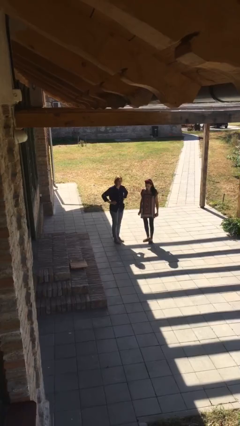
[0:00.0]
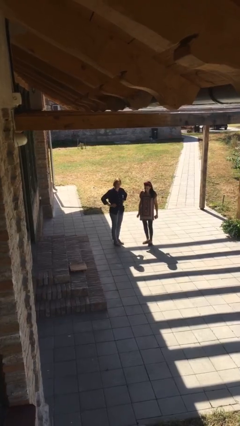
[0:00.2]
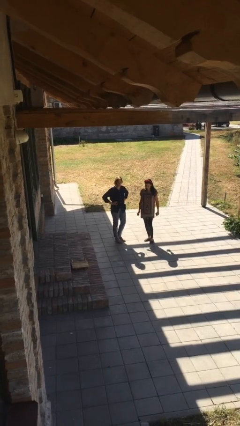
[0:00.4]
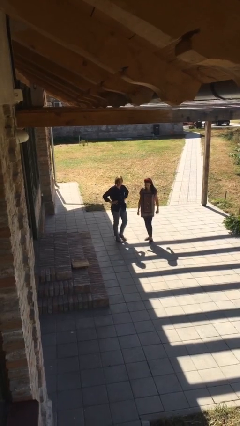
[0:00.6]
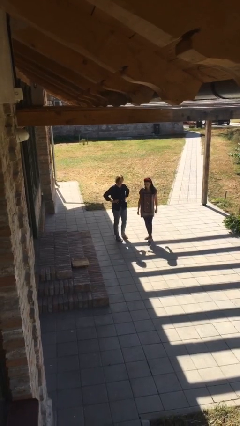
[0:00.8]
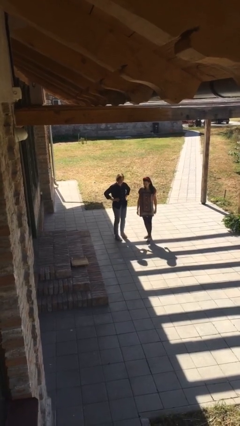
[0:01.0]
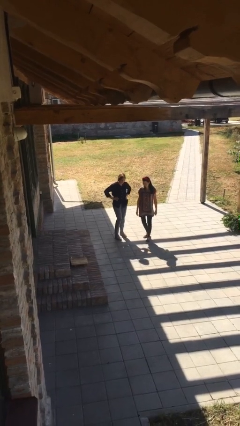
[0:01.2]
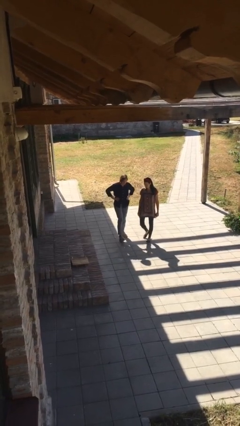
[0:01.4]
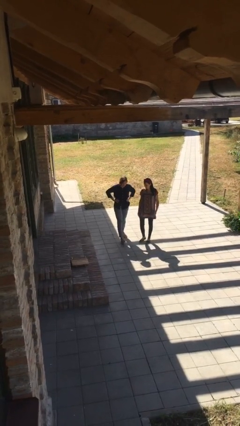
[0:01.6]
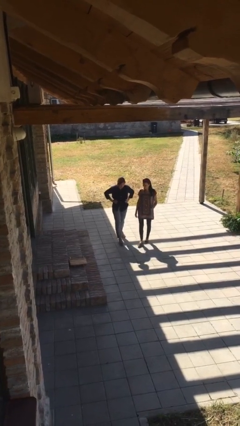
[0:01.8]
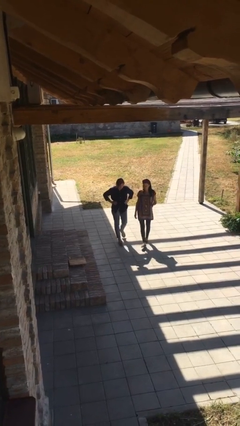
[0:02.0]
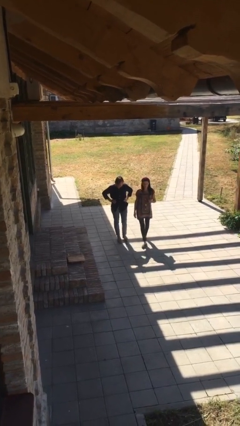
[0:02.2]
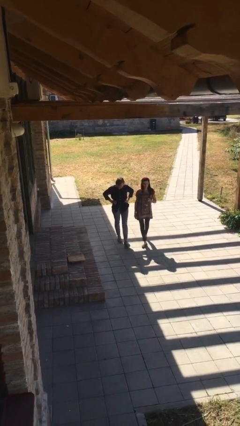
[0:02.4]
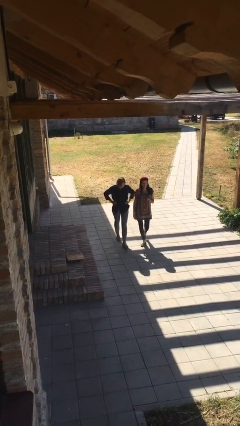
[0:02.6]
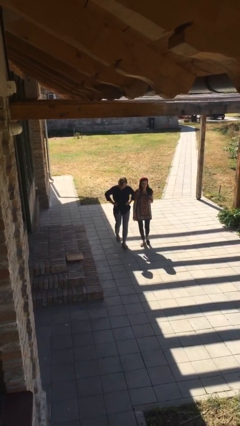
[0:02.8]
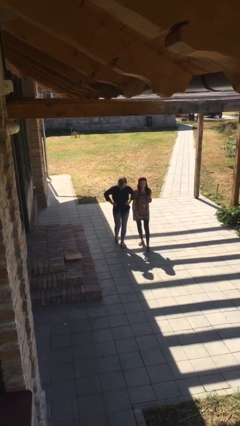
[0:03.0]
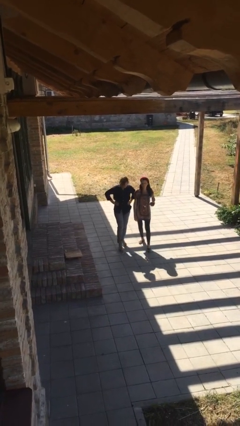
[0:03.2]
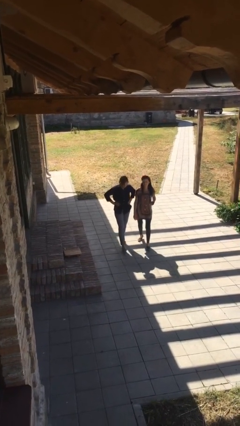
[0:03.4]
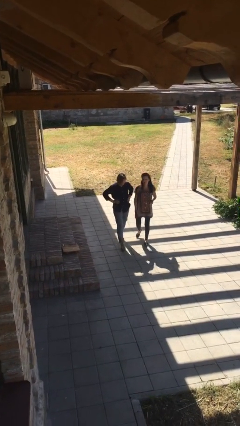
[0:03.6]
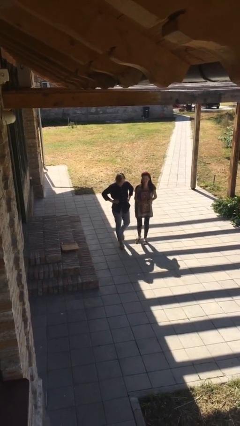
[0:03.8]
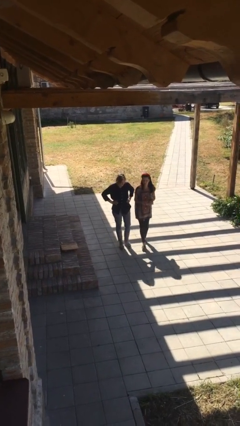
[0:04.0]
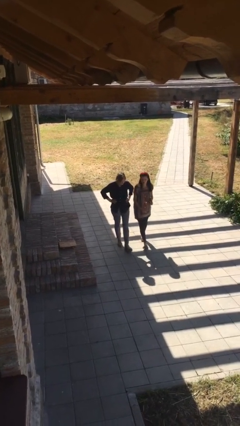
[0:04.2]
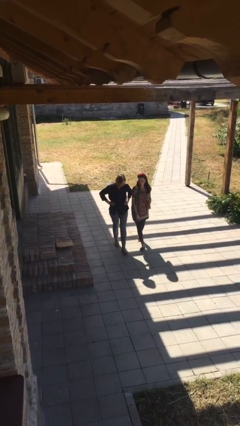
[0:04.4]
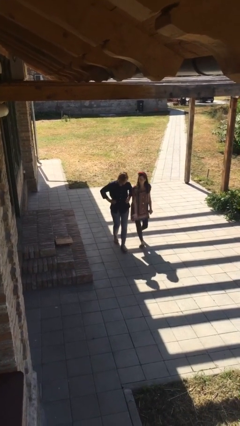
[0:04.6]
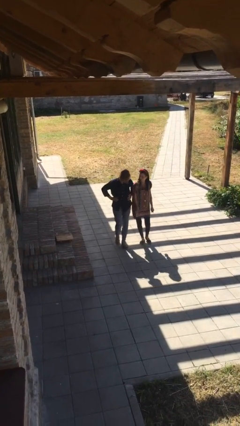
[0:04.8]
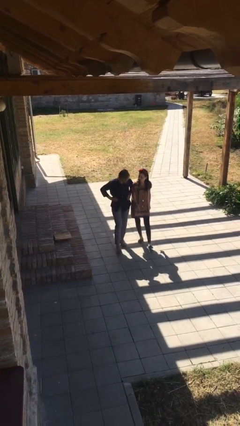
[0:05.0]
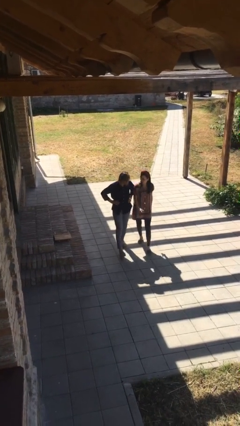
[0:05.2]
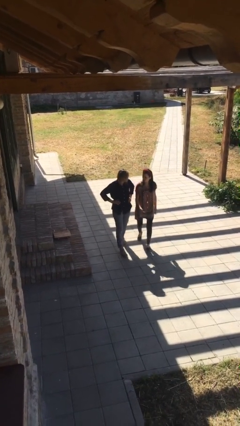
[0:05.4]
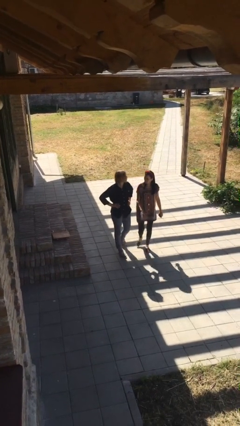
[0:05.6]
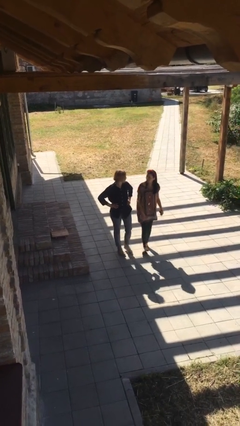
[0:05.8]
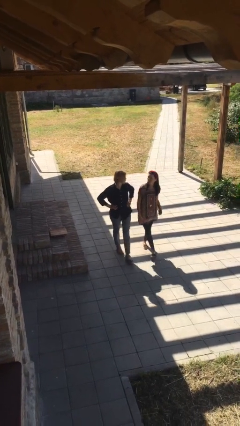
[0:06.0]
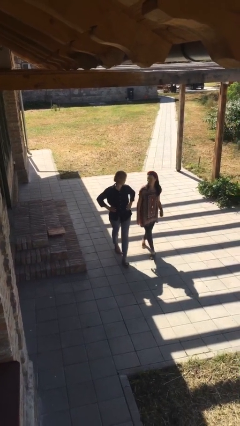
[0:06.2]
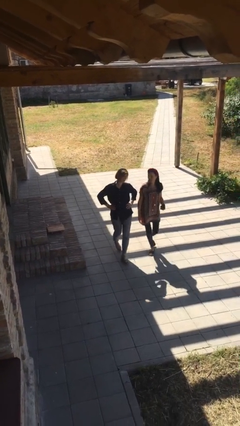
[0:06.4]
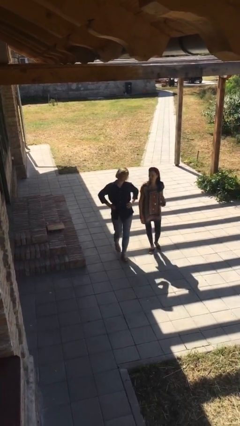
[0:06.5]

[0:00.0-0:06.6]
person talks to person

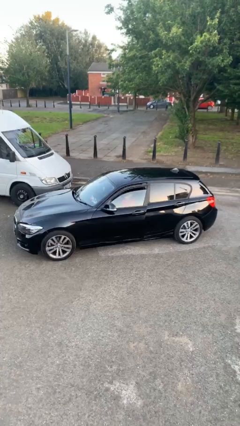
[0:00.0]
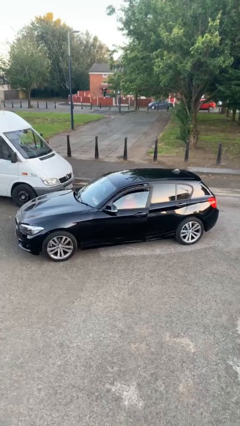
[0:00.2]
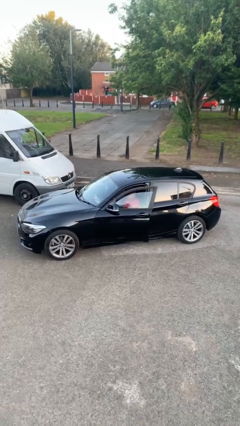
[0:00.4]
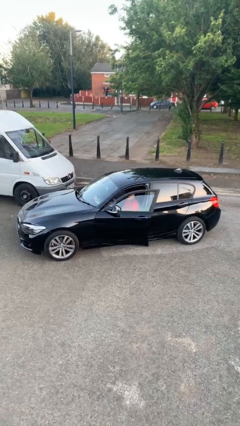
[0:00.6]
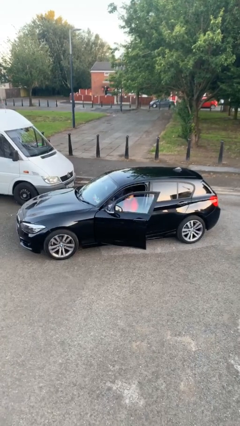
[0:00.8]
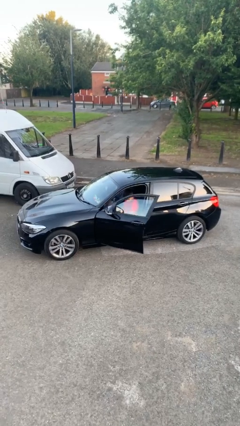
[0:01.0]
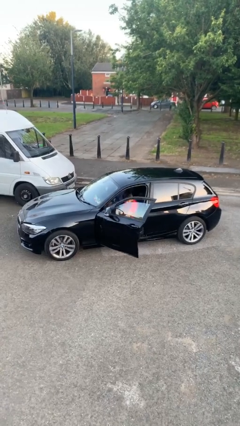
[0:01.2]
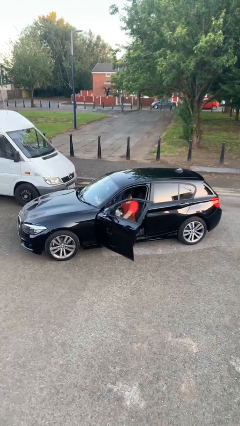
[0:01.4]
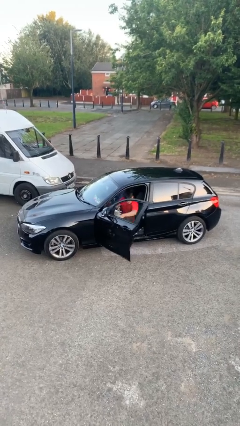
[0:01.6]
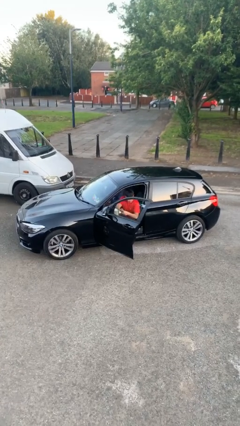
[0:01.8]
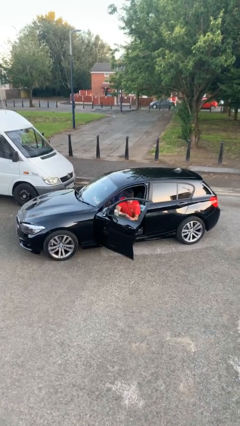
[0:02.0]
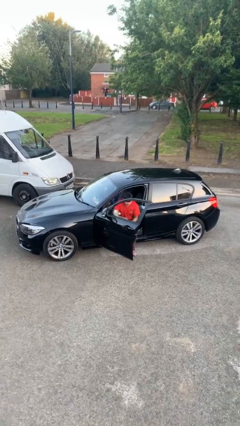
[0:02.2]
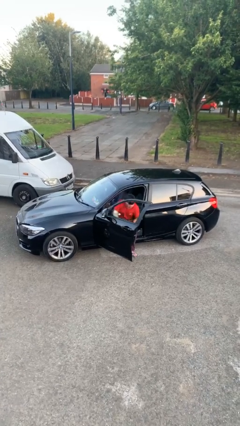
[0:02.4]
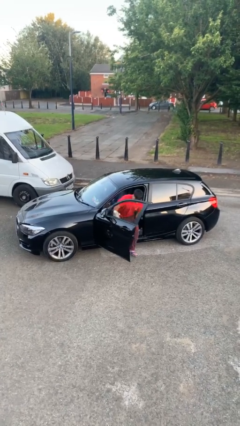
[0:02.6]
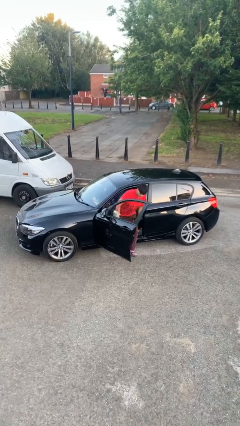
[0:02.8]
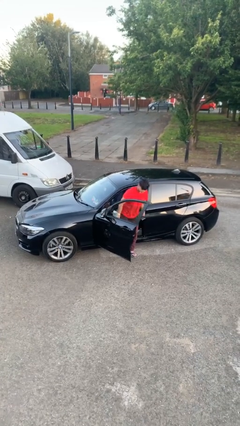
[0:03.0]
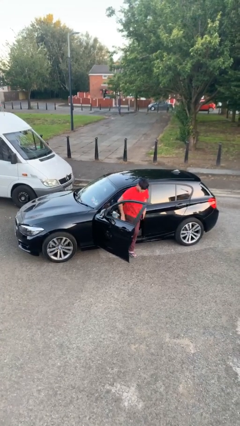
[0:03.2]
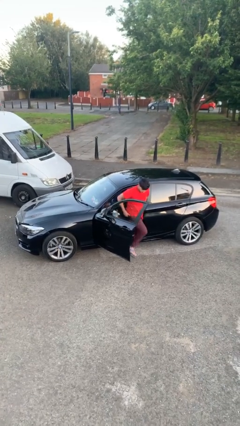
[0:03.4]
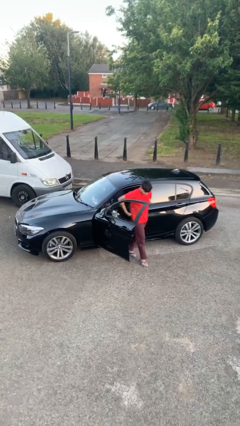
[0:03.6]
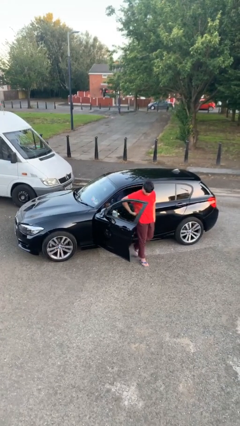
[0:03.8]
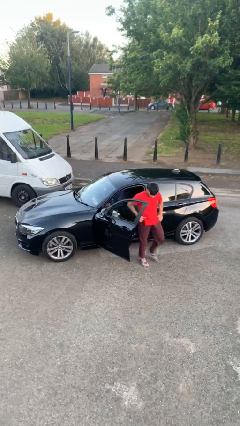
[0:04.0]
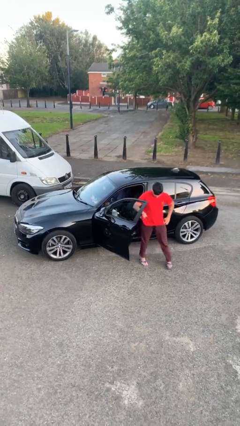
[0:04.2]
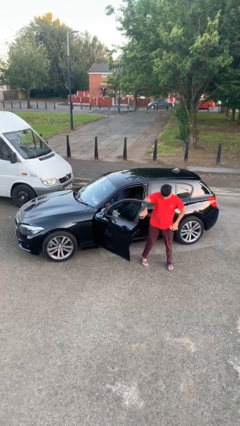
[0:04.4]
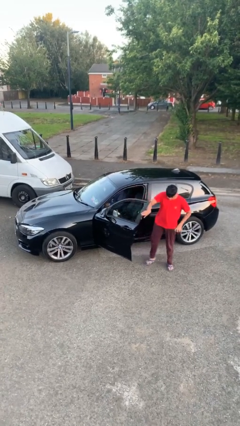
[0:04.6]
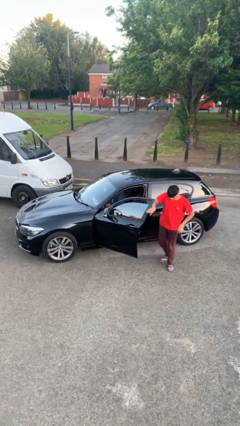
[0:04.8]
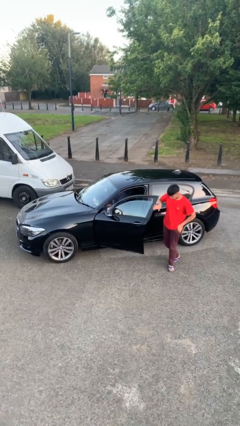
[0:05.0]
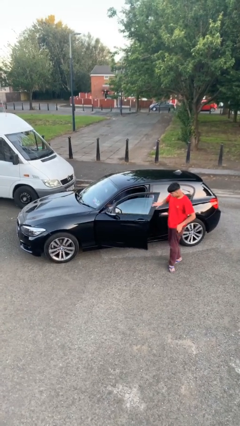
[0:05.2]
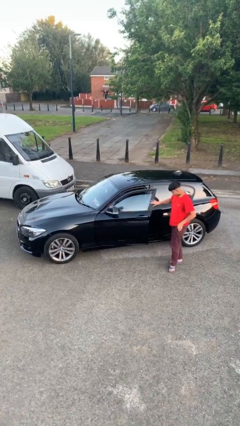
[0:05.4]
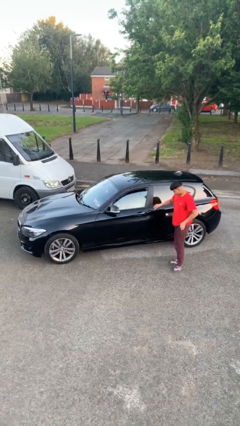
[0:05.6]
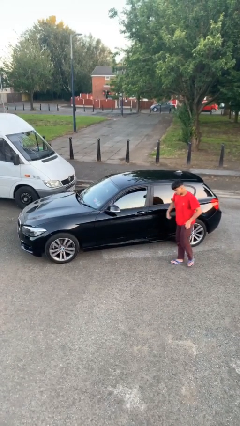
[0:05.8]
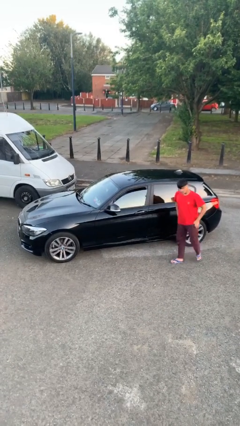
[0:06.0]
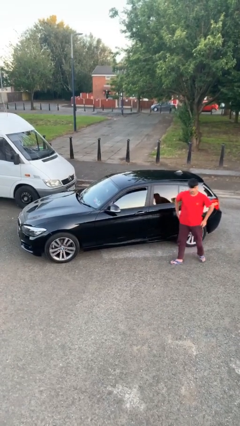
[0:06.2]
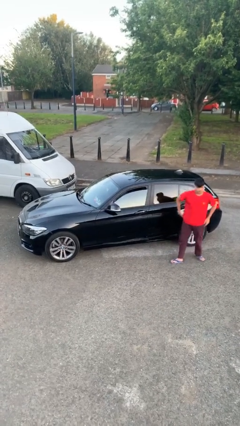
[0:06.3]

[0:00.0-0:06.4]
car drops off person

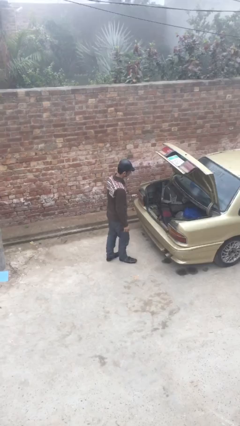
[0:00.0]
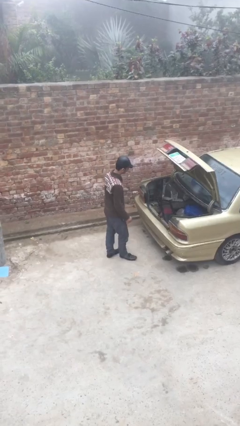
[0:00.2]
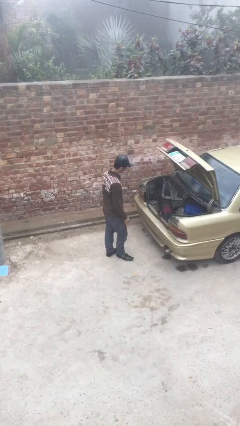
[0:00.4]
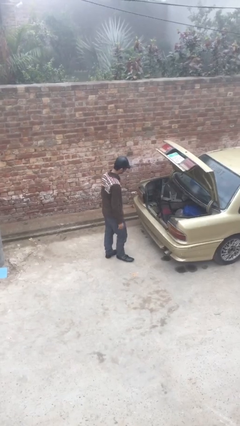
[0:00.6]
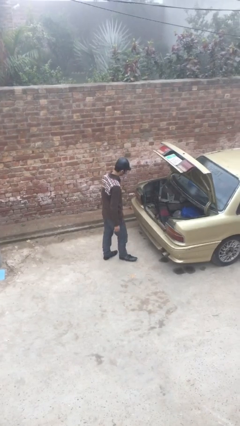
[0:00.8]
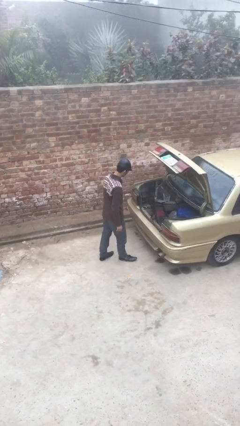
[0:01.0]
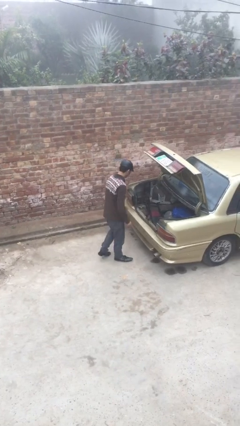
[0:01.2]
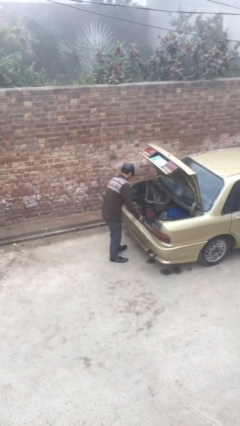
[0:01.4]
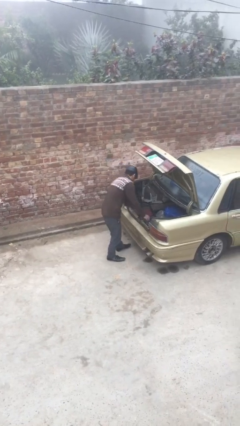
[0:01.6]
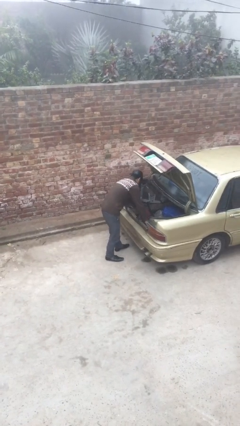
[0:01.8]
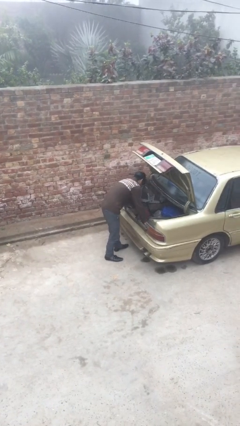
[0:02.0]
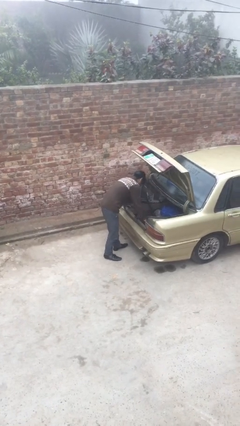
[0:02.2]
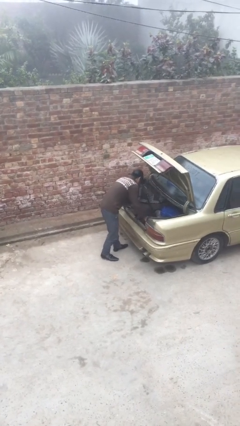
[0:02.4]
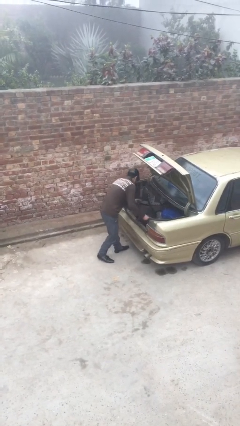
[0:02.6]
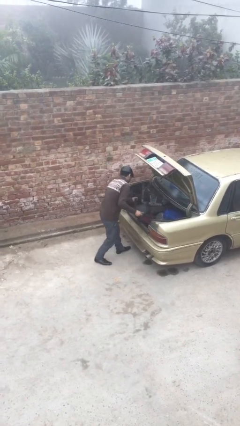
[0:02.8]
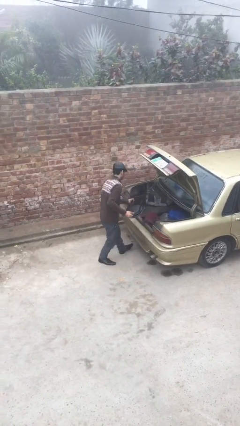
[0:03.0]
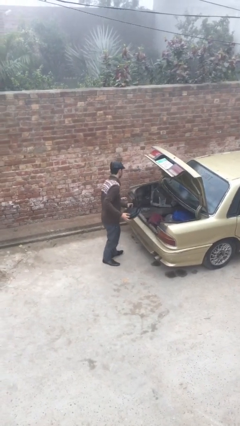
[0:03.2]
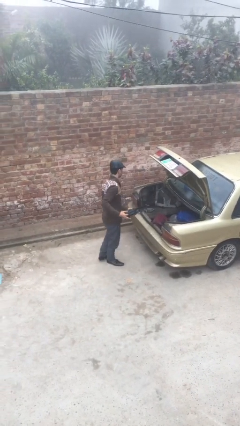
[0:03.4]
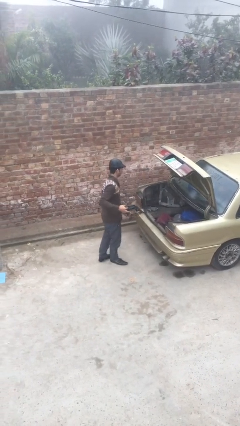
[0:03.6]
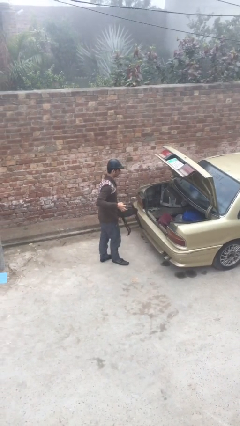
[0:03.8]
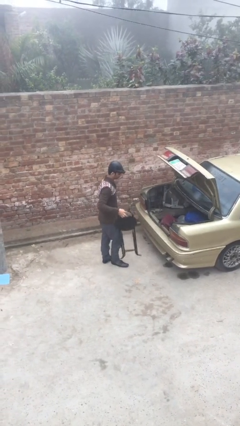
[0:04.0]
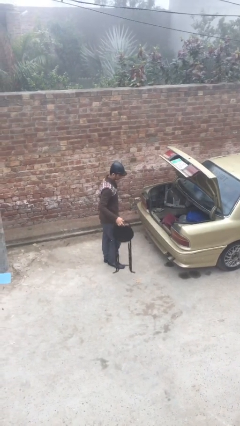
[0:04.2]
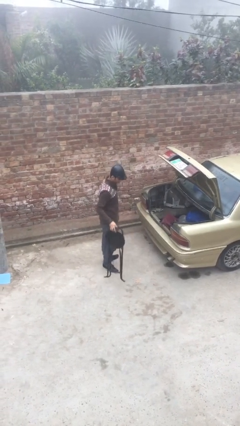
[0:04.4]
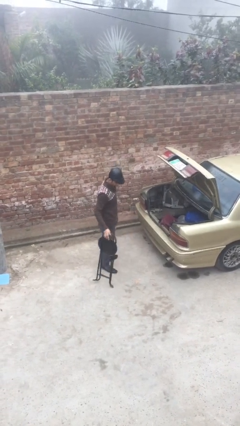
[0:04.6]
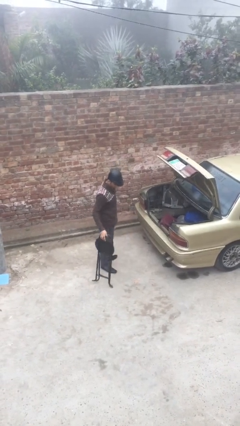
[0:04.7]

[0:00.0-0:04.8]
person unloads car

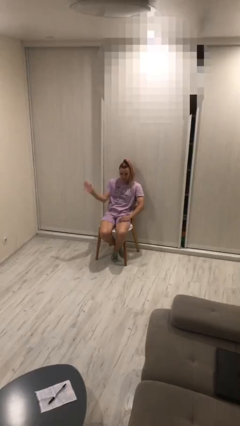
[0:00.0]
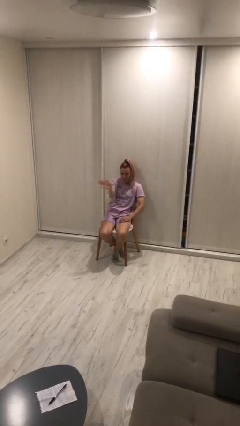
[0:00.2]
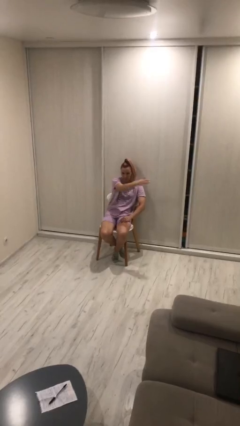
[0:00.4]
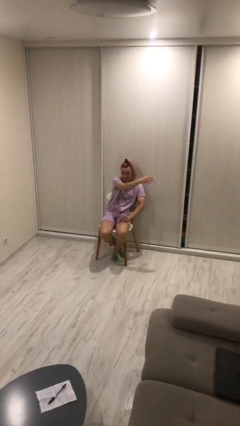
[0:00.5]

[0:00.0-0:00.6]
person gestures swipe left
